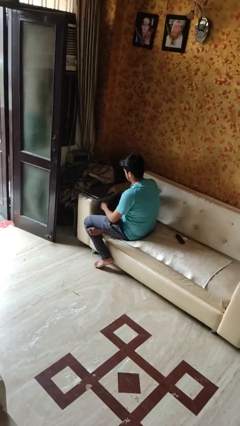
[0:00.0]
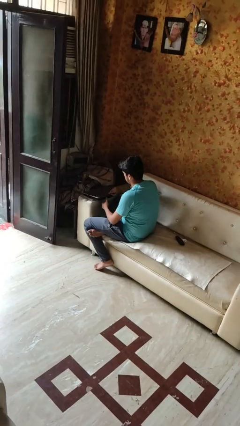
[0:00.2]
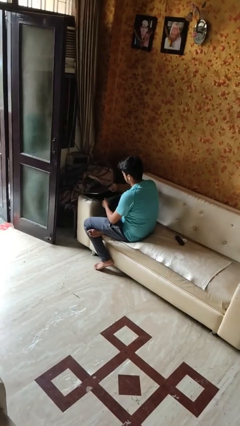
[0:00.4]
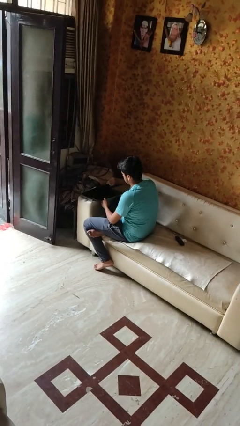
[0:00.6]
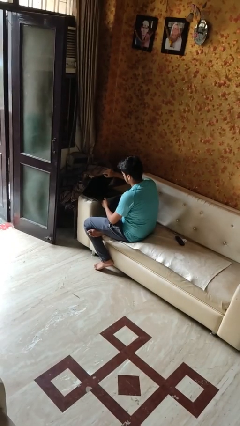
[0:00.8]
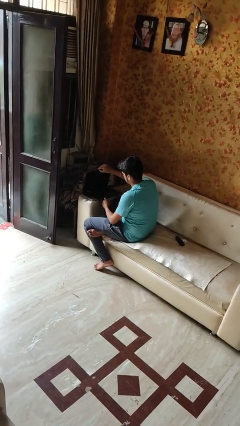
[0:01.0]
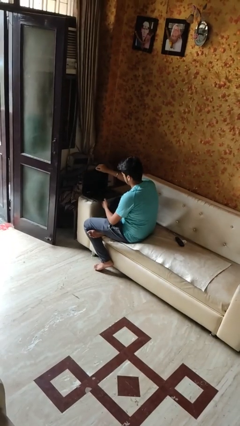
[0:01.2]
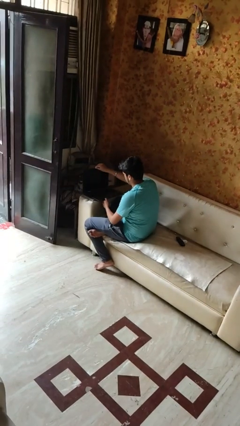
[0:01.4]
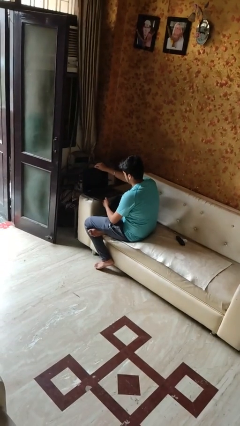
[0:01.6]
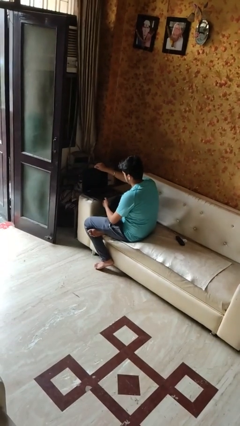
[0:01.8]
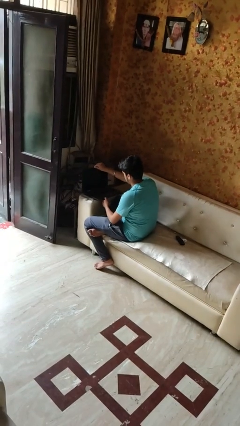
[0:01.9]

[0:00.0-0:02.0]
person opens laptop

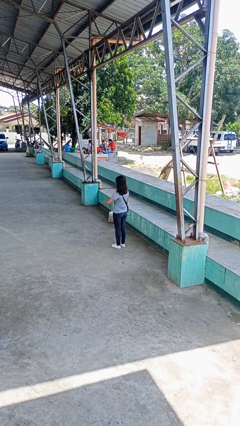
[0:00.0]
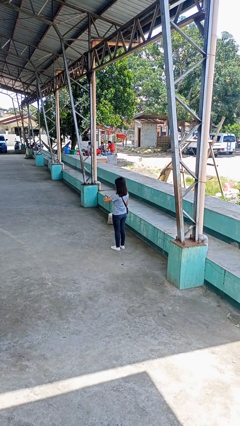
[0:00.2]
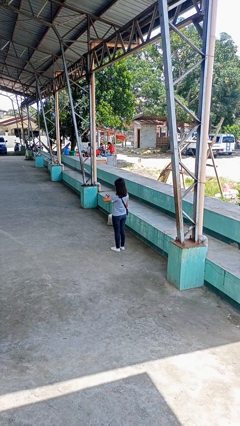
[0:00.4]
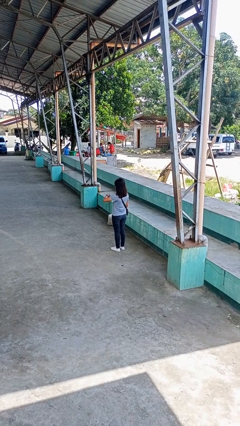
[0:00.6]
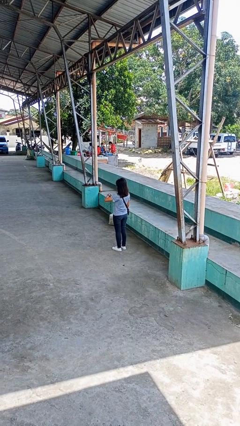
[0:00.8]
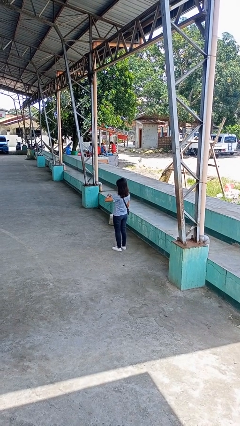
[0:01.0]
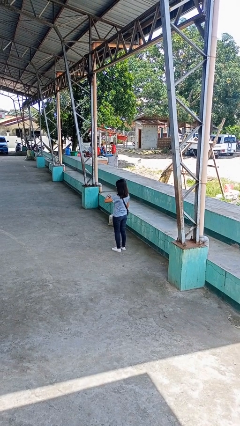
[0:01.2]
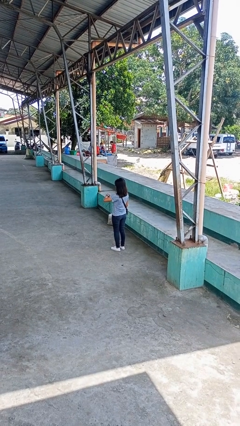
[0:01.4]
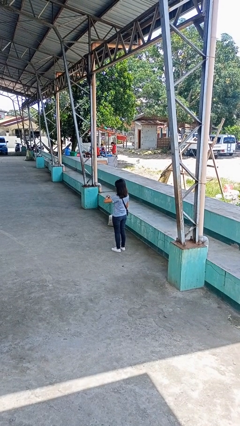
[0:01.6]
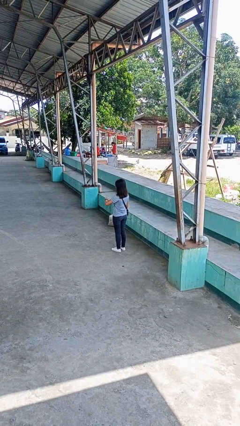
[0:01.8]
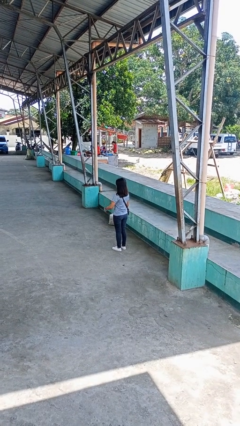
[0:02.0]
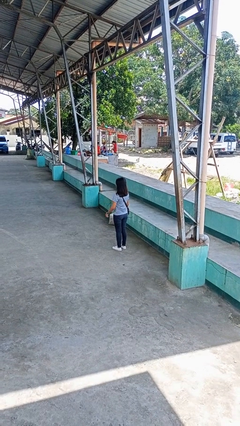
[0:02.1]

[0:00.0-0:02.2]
person looks at wristwatch

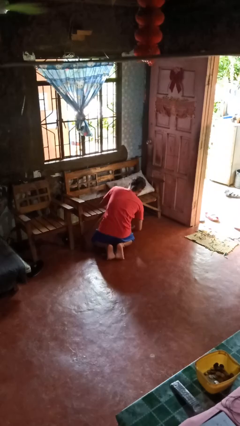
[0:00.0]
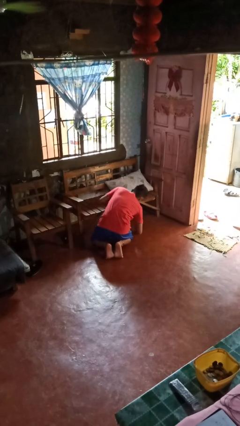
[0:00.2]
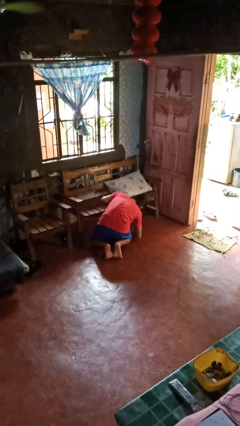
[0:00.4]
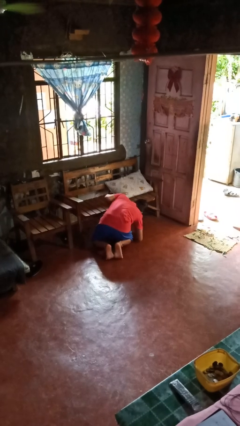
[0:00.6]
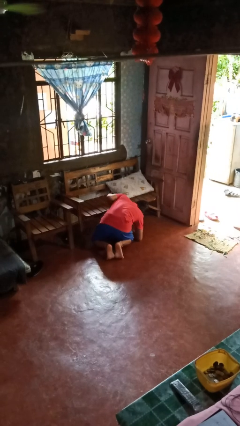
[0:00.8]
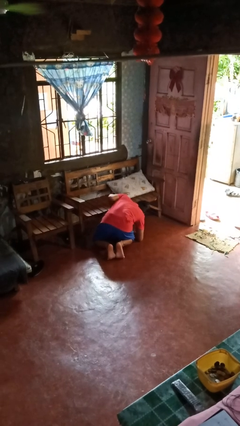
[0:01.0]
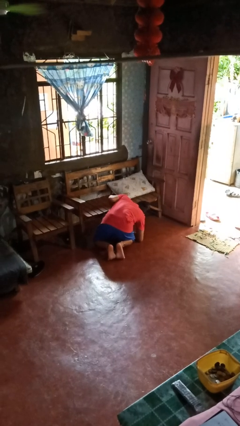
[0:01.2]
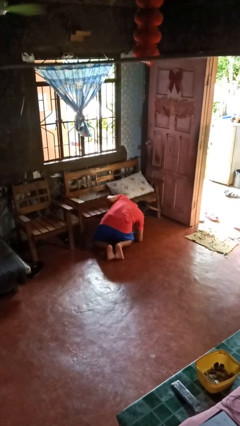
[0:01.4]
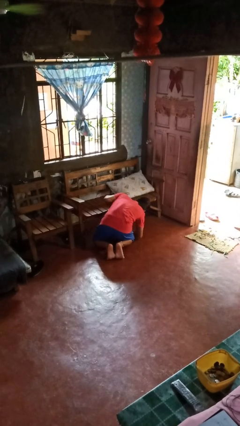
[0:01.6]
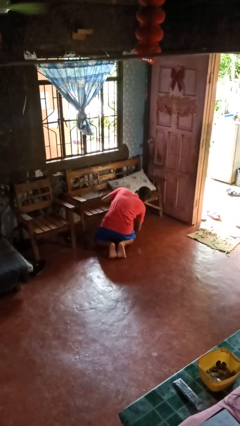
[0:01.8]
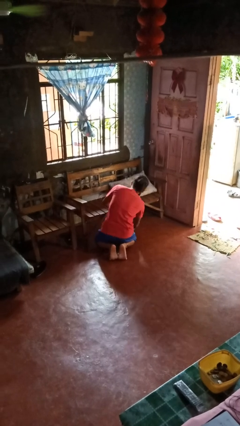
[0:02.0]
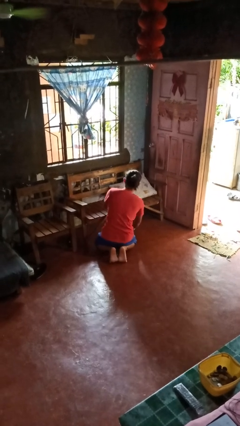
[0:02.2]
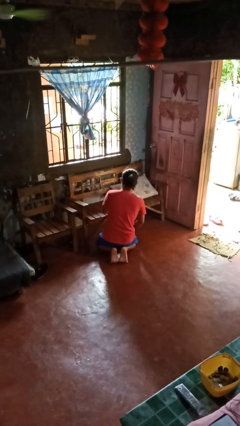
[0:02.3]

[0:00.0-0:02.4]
person searches in couch

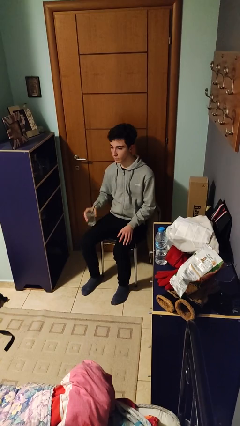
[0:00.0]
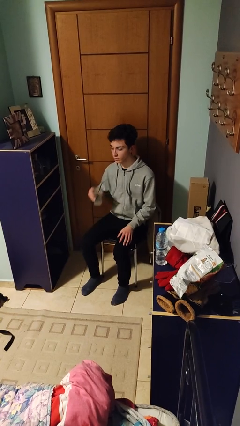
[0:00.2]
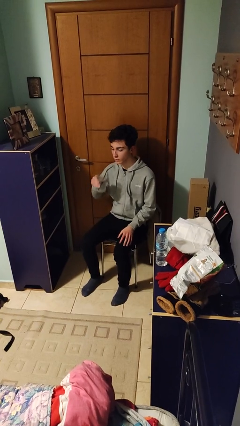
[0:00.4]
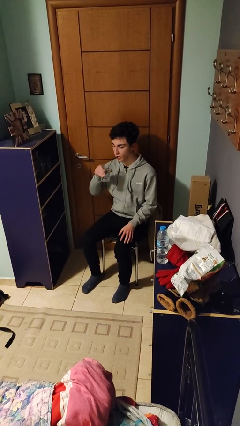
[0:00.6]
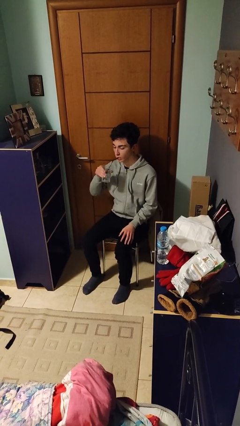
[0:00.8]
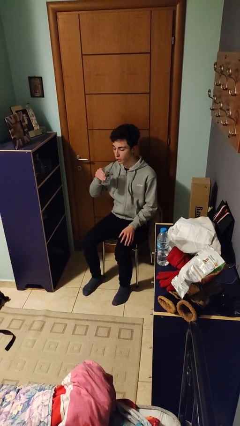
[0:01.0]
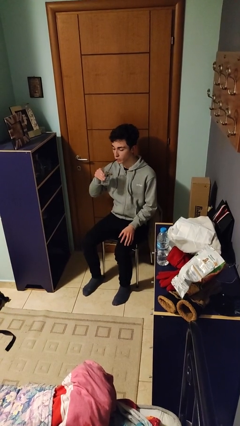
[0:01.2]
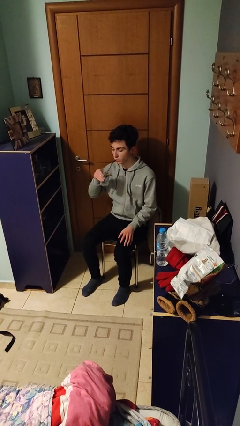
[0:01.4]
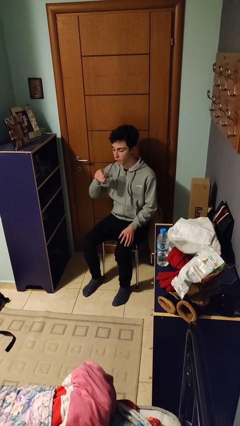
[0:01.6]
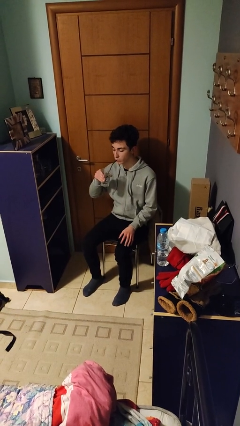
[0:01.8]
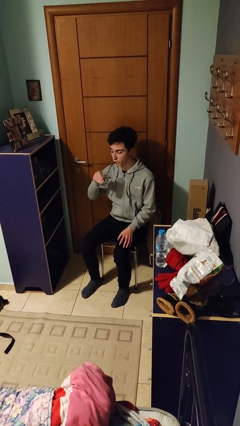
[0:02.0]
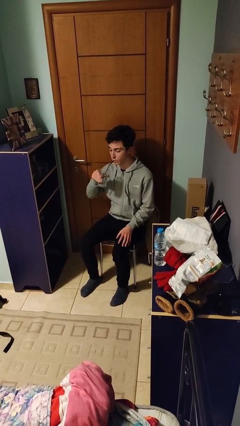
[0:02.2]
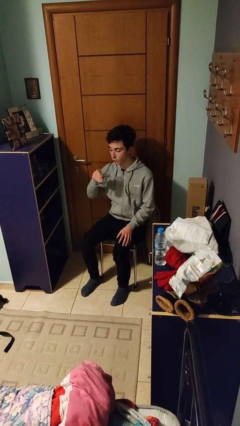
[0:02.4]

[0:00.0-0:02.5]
person drinks from straw

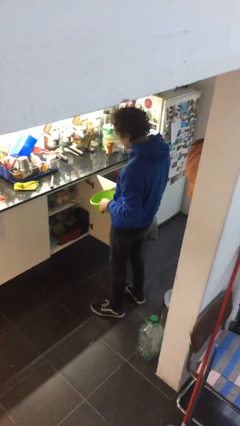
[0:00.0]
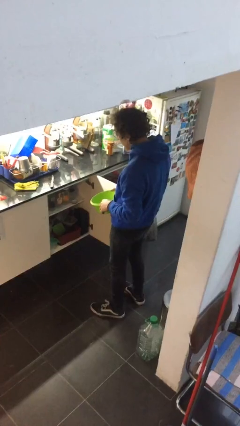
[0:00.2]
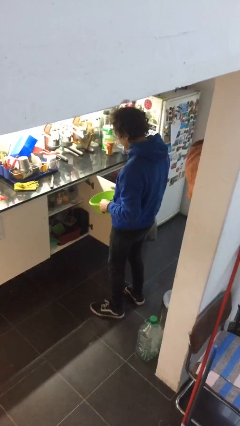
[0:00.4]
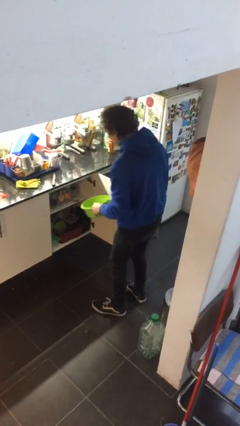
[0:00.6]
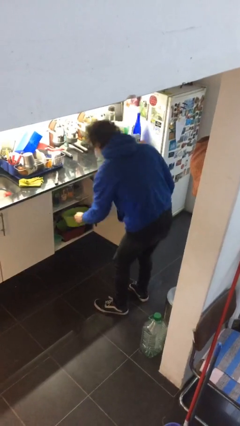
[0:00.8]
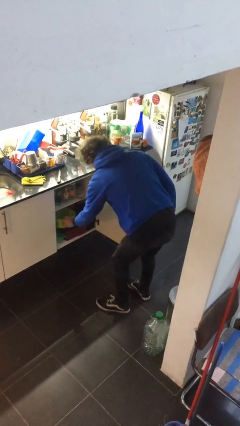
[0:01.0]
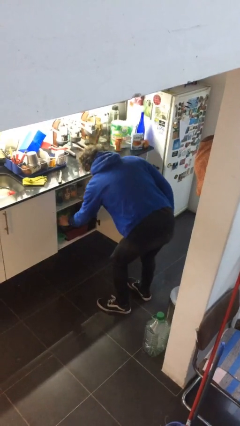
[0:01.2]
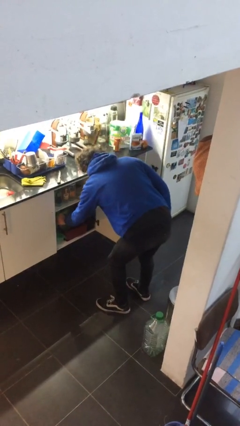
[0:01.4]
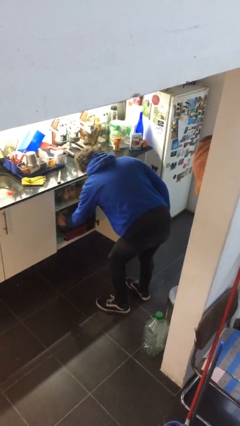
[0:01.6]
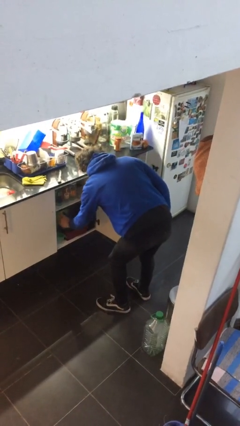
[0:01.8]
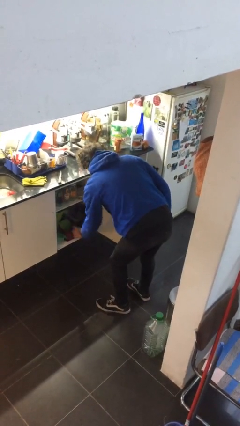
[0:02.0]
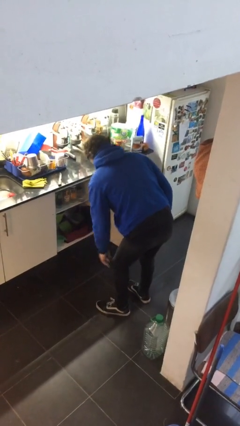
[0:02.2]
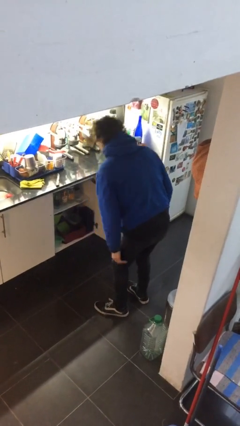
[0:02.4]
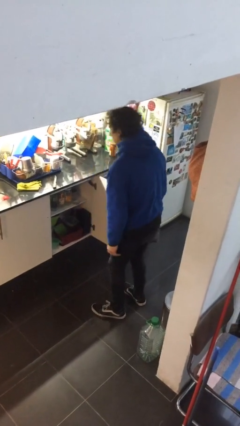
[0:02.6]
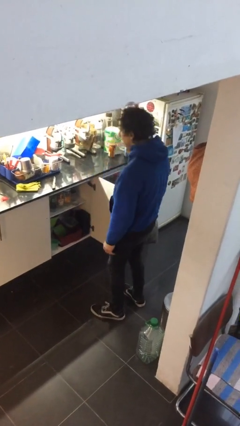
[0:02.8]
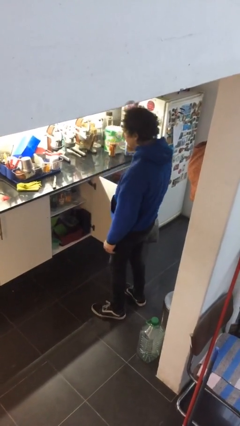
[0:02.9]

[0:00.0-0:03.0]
person puts down object into cabinet

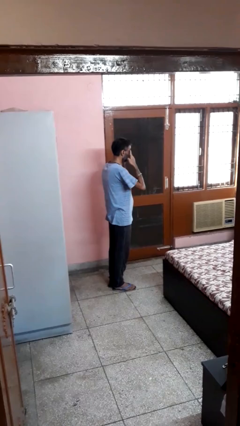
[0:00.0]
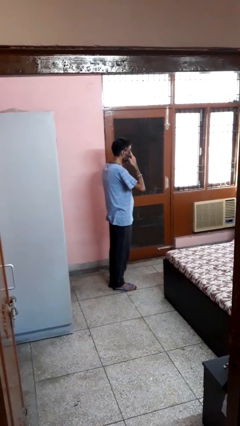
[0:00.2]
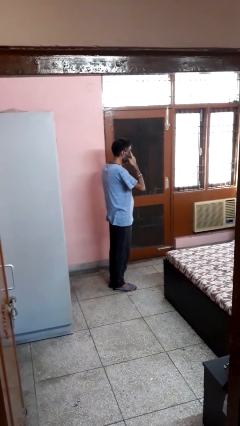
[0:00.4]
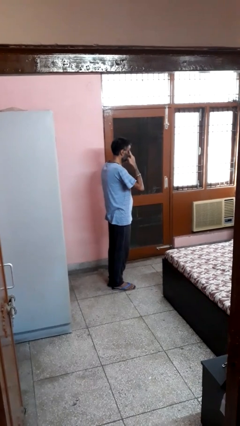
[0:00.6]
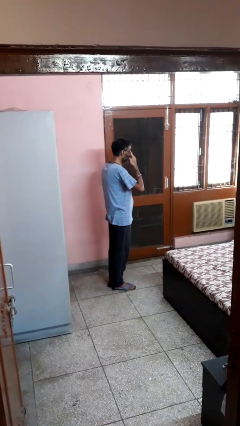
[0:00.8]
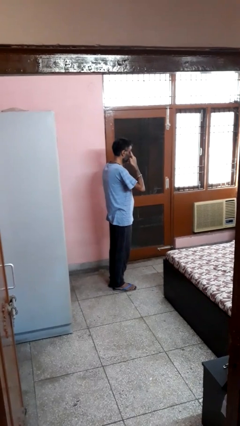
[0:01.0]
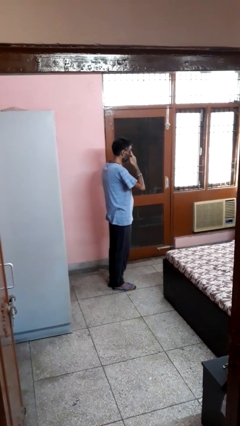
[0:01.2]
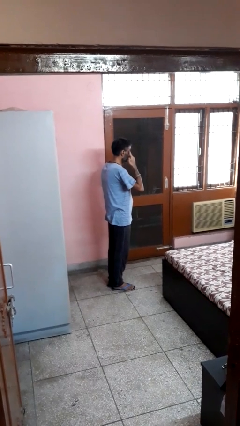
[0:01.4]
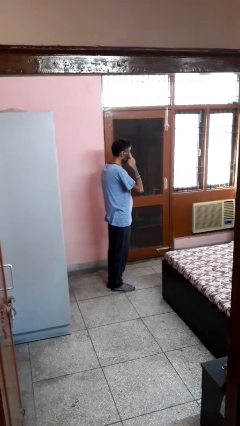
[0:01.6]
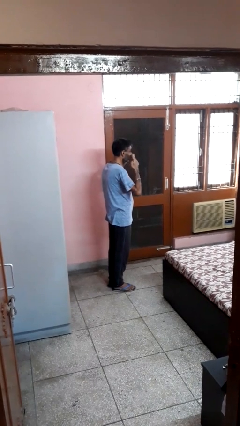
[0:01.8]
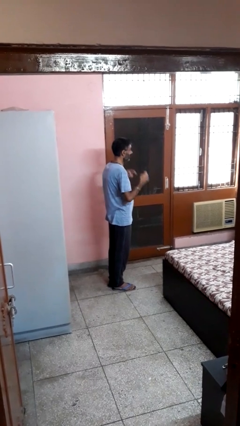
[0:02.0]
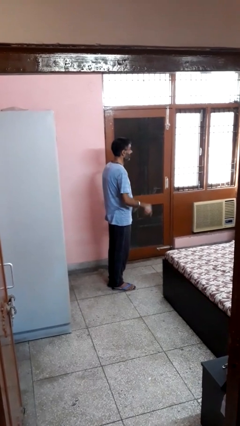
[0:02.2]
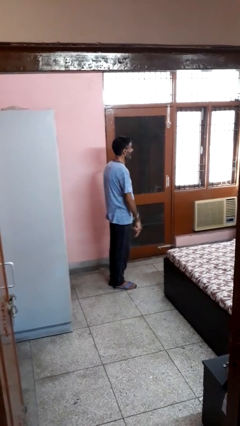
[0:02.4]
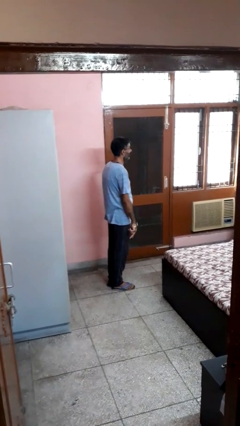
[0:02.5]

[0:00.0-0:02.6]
person rubs eyes

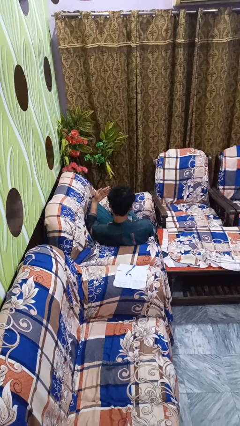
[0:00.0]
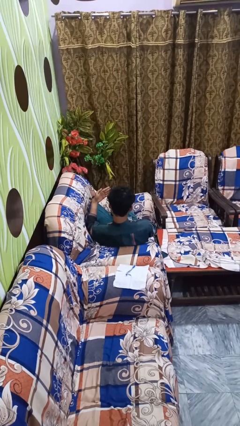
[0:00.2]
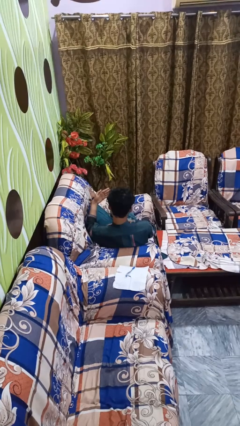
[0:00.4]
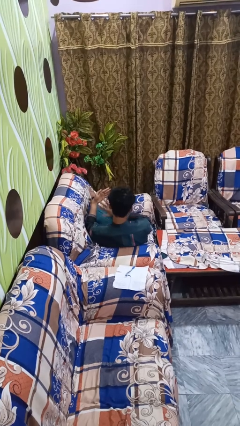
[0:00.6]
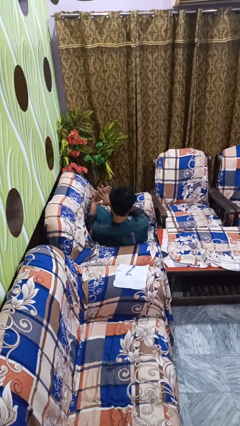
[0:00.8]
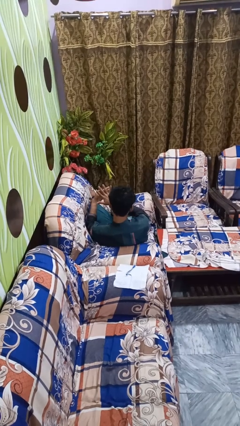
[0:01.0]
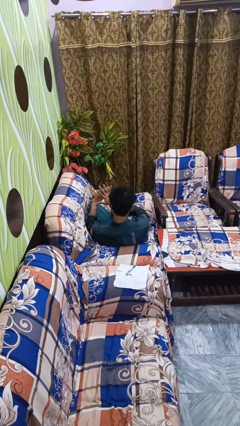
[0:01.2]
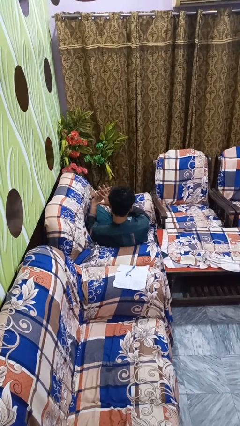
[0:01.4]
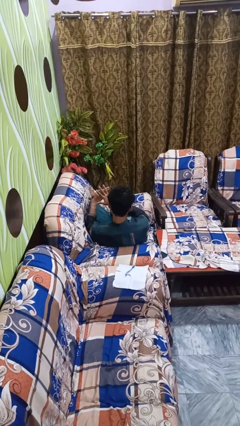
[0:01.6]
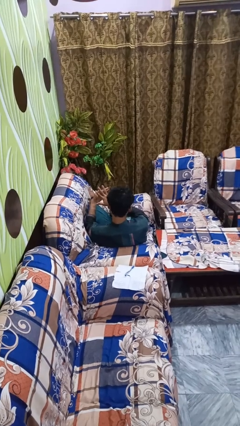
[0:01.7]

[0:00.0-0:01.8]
person gestures number five

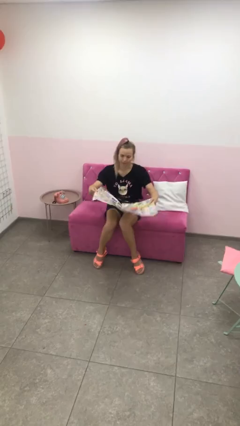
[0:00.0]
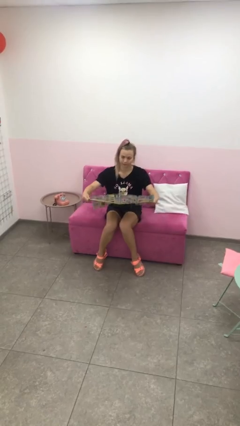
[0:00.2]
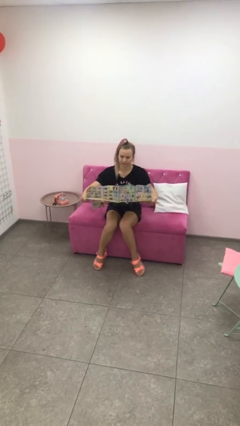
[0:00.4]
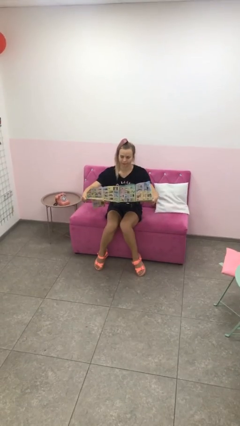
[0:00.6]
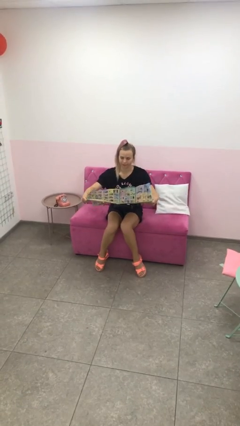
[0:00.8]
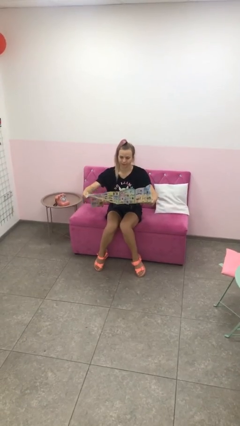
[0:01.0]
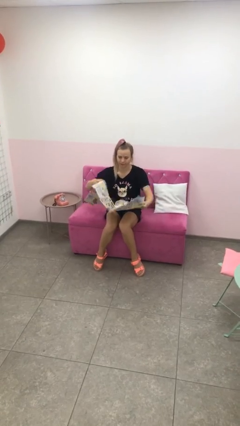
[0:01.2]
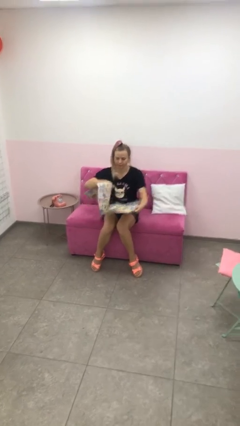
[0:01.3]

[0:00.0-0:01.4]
person reads newspaper
